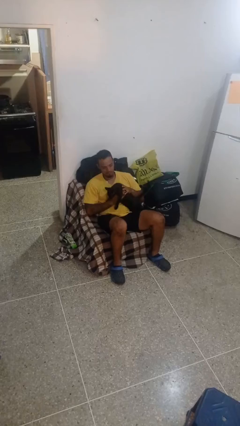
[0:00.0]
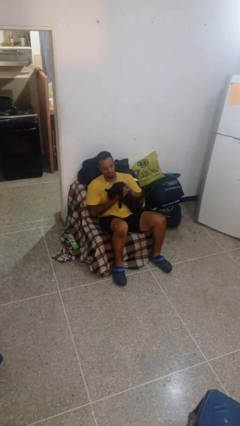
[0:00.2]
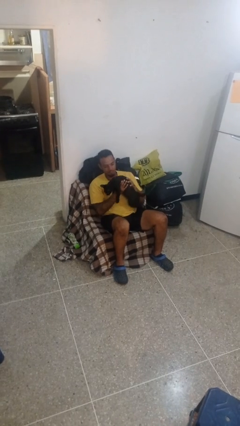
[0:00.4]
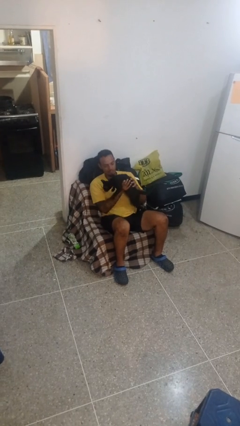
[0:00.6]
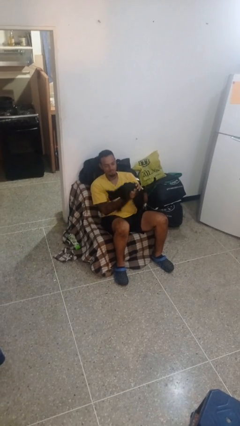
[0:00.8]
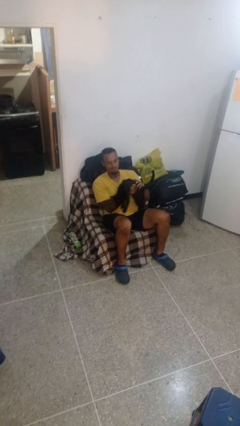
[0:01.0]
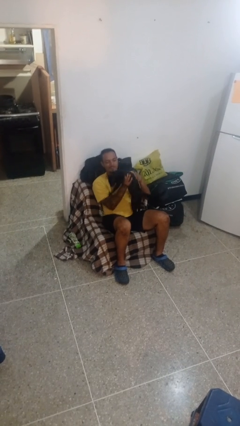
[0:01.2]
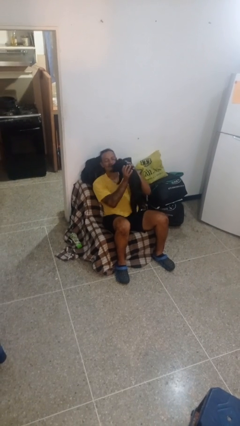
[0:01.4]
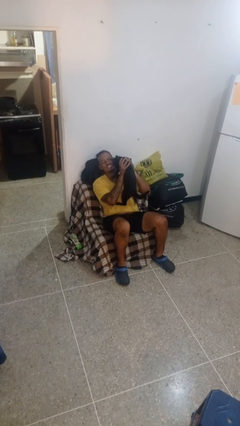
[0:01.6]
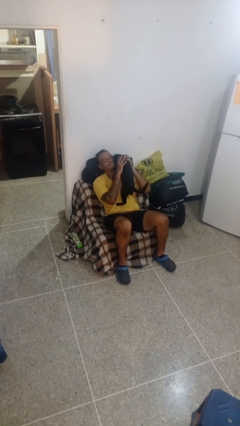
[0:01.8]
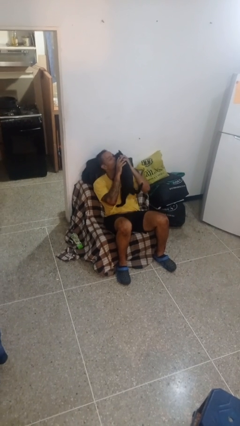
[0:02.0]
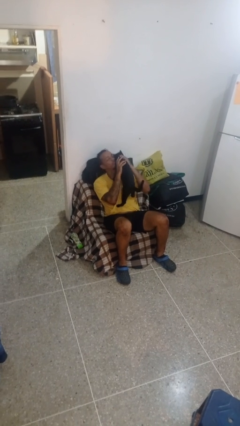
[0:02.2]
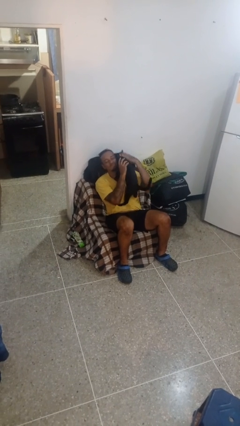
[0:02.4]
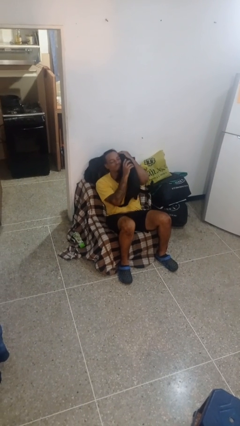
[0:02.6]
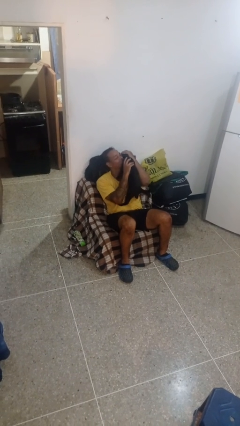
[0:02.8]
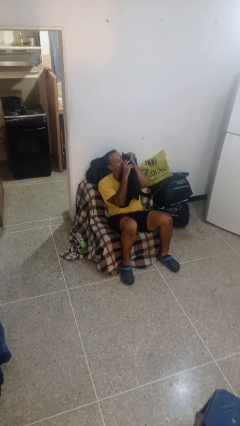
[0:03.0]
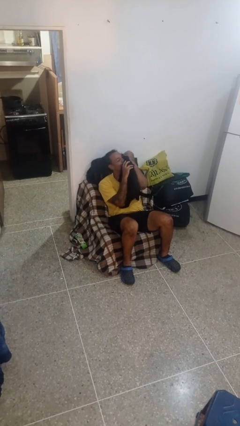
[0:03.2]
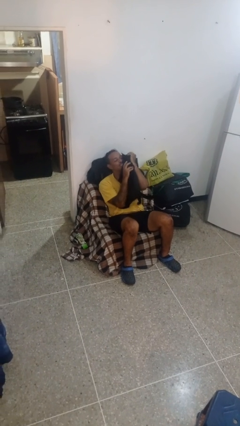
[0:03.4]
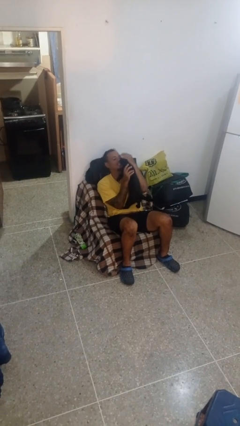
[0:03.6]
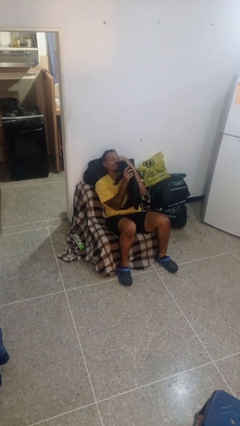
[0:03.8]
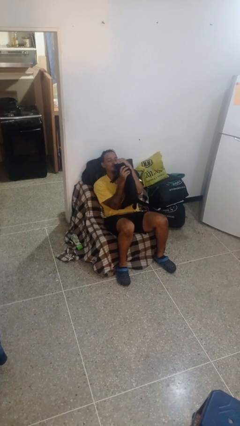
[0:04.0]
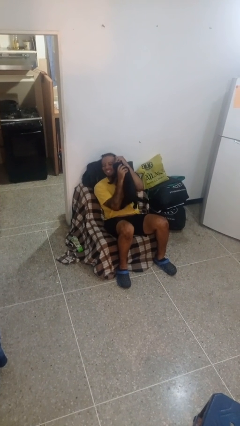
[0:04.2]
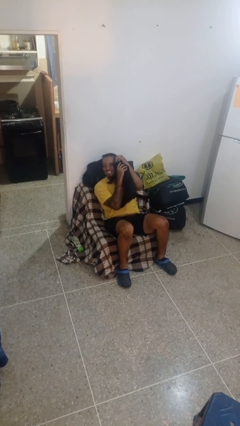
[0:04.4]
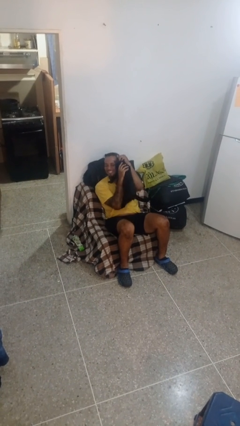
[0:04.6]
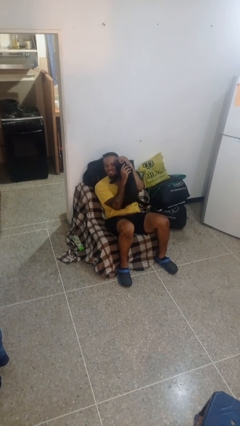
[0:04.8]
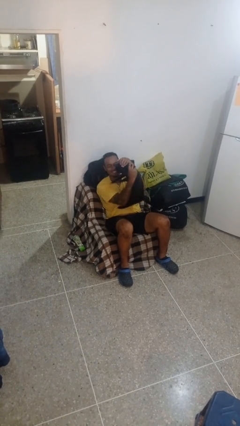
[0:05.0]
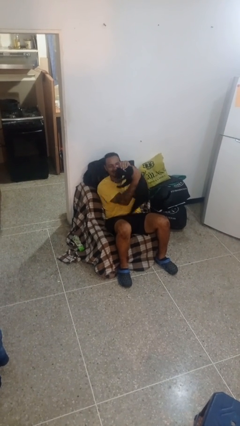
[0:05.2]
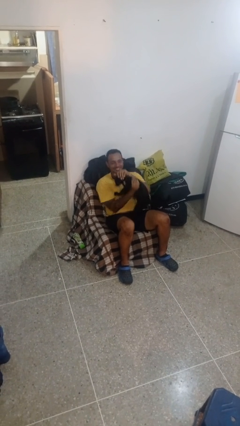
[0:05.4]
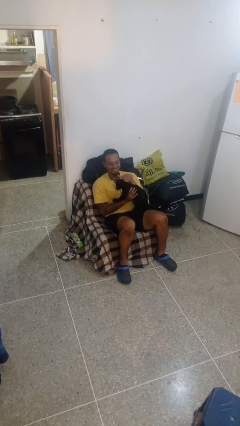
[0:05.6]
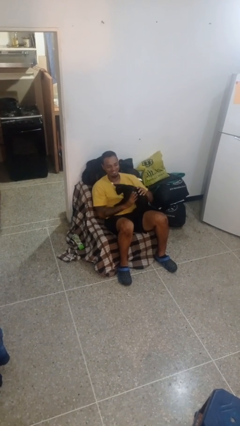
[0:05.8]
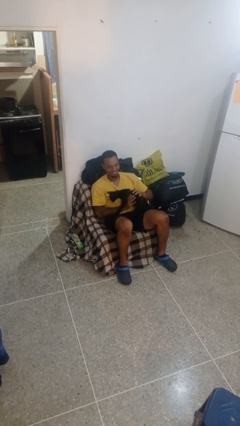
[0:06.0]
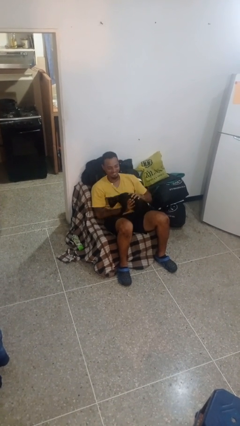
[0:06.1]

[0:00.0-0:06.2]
person hugs cat

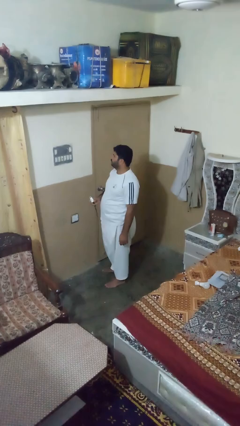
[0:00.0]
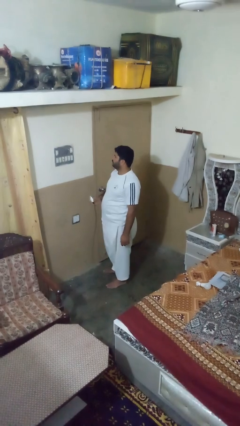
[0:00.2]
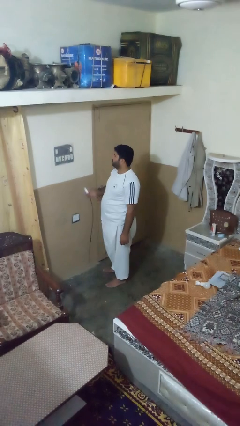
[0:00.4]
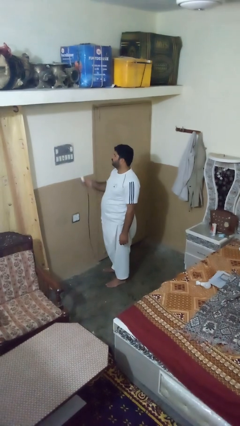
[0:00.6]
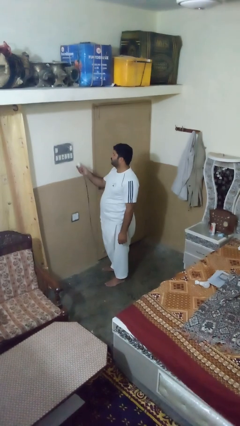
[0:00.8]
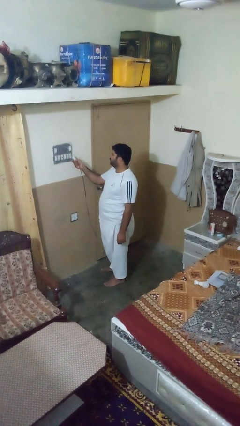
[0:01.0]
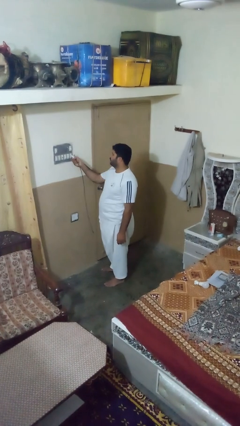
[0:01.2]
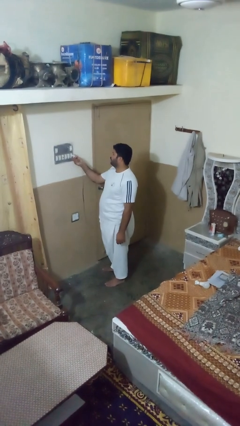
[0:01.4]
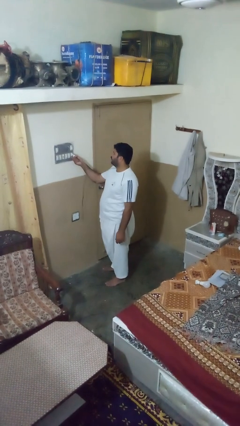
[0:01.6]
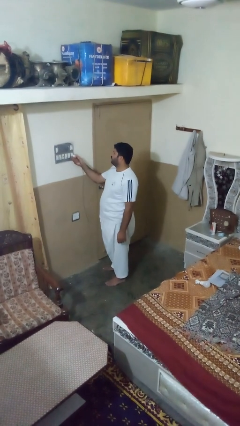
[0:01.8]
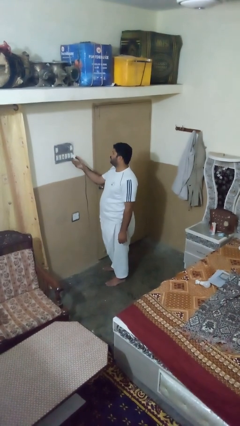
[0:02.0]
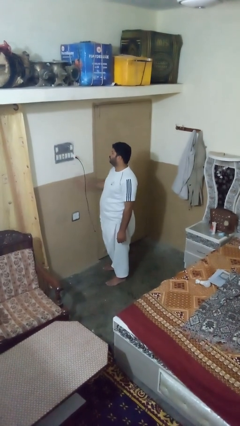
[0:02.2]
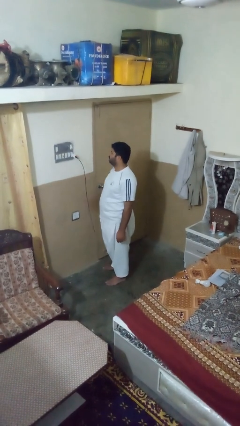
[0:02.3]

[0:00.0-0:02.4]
person plugs into electrical socket

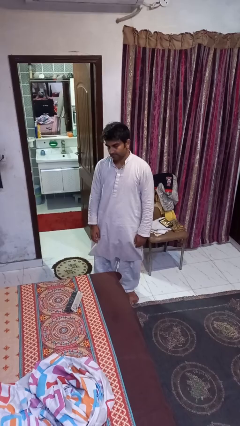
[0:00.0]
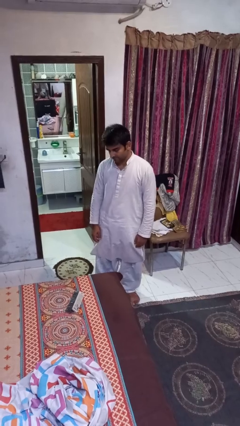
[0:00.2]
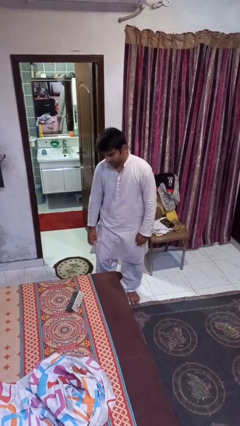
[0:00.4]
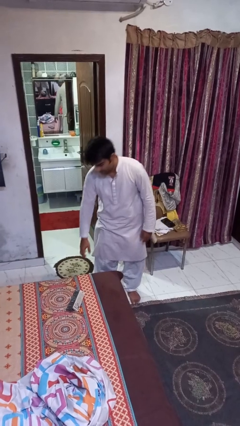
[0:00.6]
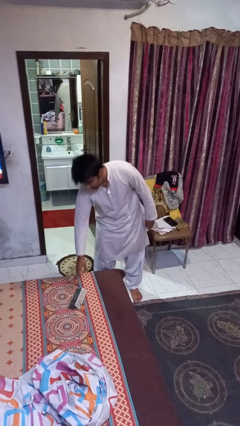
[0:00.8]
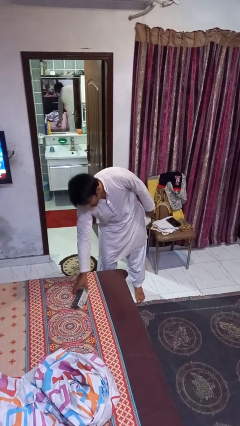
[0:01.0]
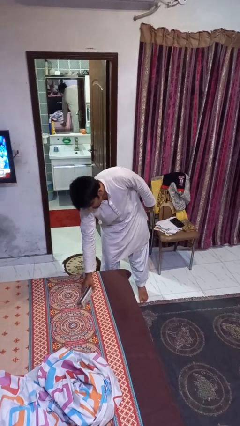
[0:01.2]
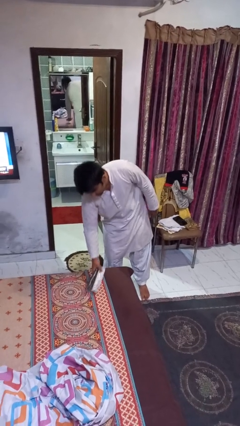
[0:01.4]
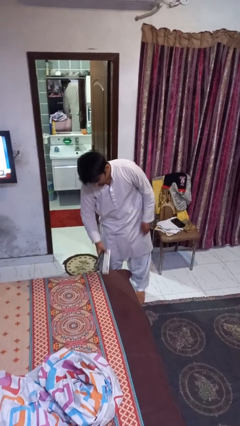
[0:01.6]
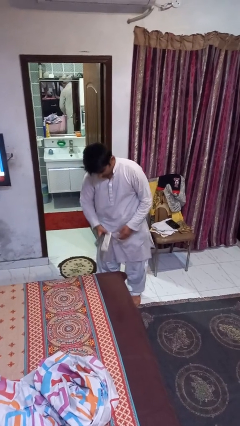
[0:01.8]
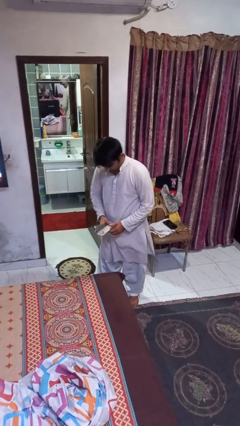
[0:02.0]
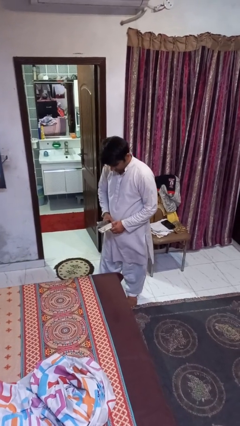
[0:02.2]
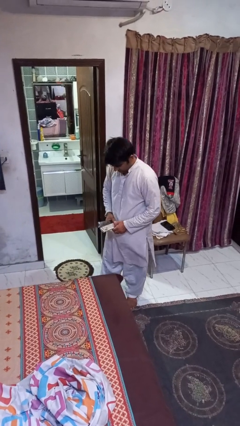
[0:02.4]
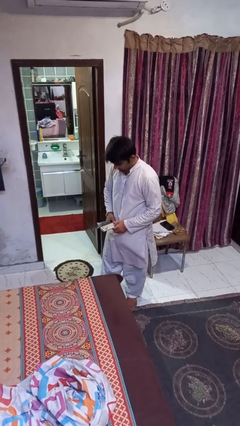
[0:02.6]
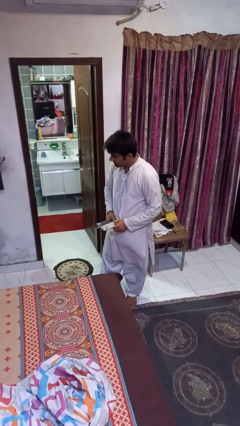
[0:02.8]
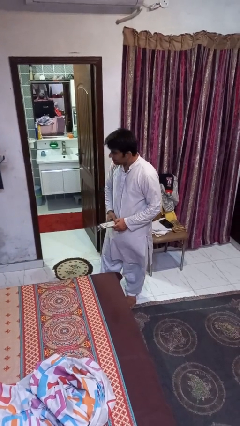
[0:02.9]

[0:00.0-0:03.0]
person picks up object from bed

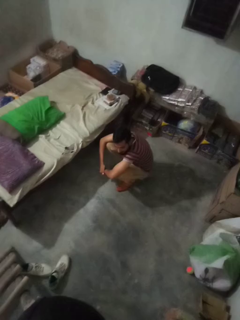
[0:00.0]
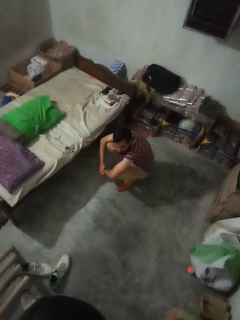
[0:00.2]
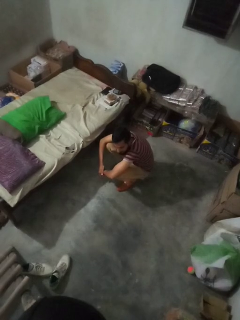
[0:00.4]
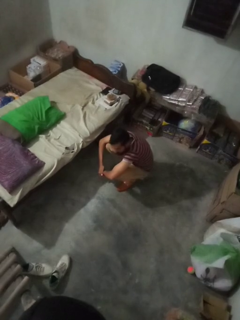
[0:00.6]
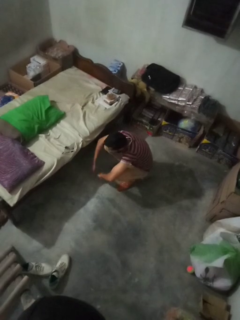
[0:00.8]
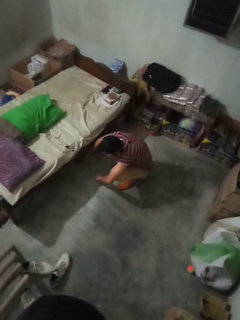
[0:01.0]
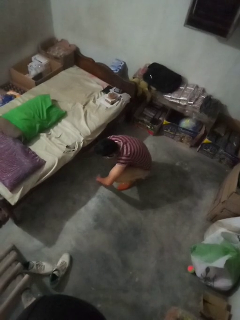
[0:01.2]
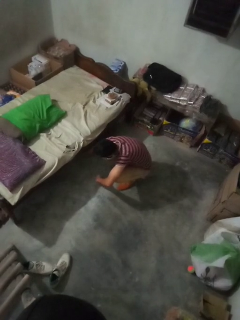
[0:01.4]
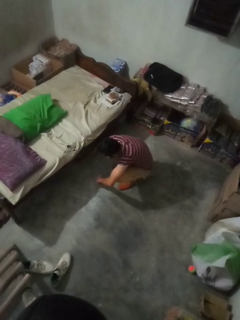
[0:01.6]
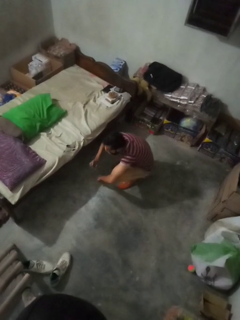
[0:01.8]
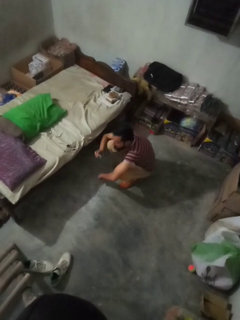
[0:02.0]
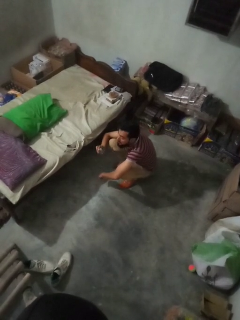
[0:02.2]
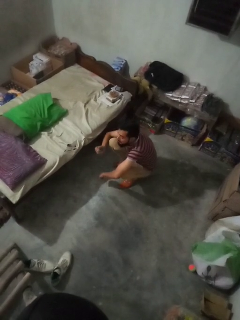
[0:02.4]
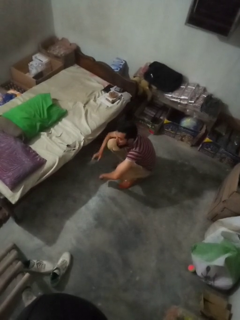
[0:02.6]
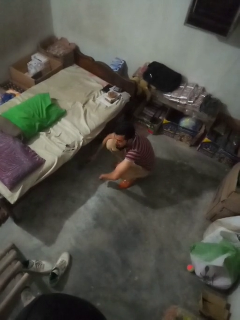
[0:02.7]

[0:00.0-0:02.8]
person searches under couch

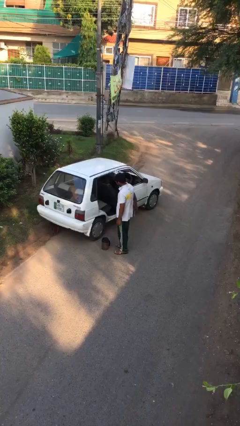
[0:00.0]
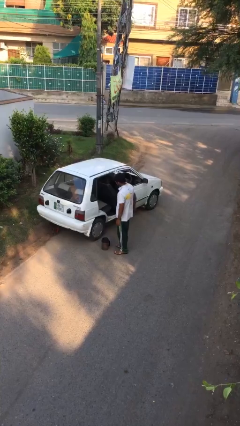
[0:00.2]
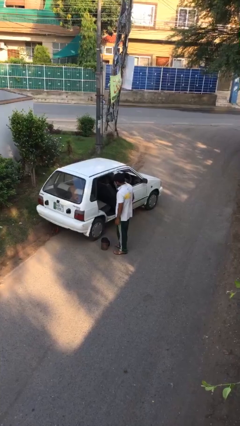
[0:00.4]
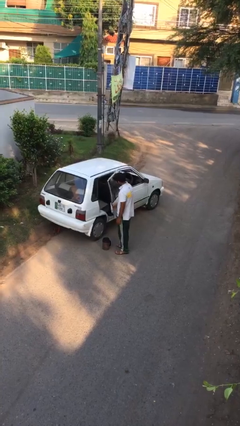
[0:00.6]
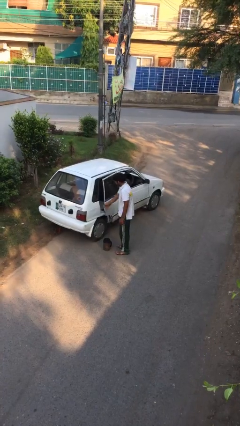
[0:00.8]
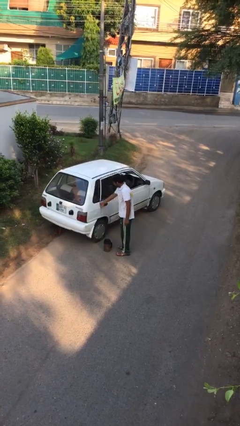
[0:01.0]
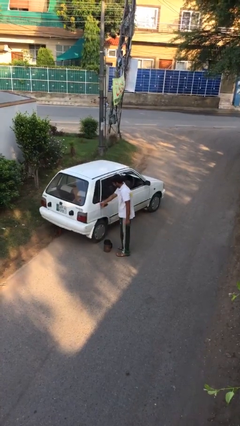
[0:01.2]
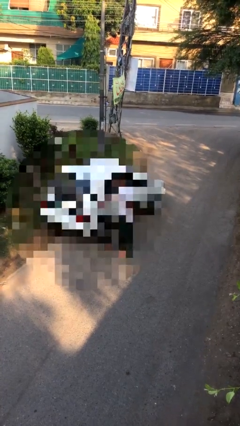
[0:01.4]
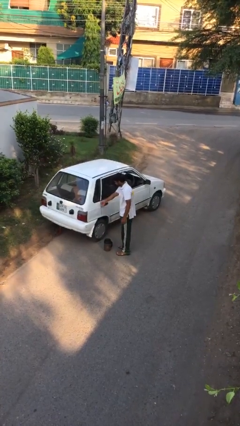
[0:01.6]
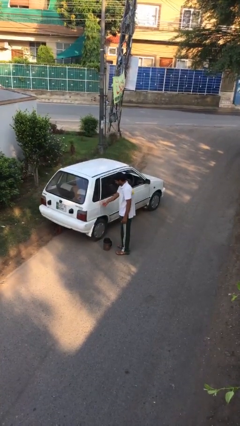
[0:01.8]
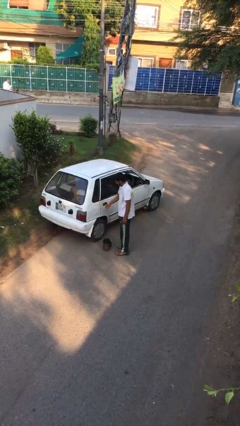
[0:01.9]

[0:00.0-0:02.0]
person closes car door

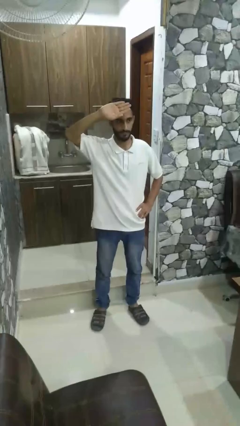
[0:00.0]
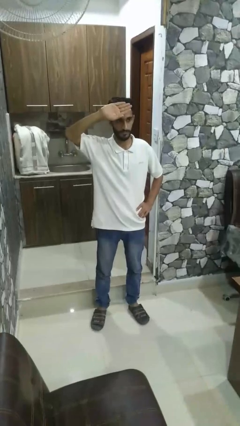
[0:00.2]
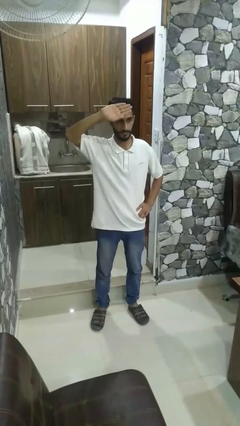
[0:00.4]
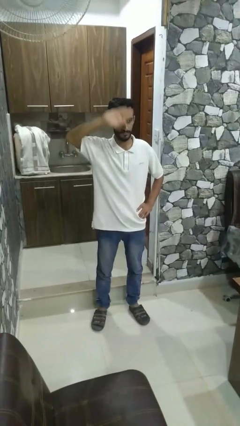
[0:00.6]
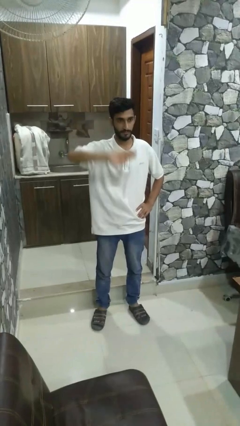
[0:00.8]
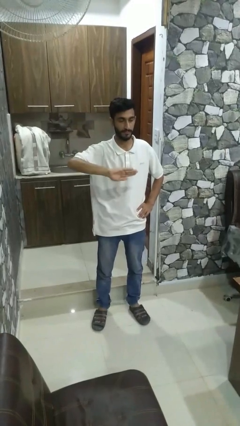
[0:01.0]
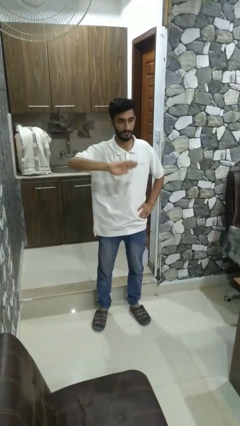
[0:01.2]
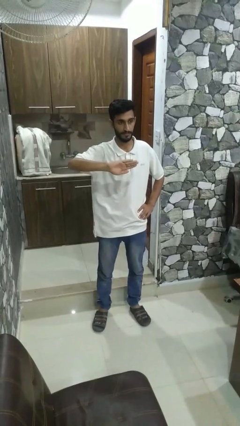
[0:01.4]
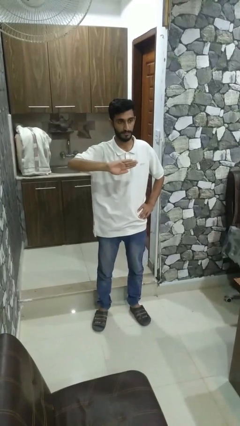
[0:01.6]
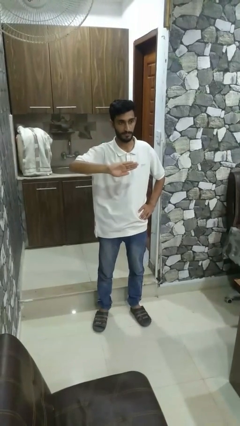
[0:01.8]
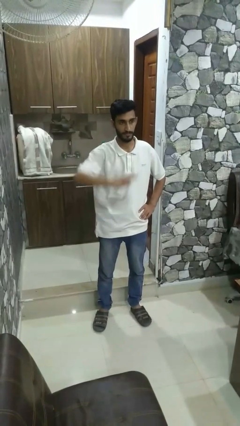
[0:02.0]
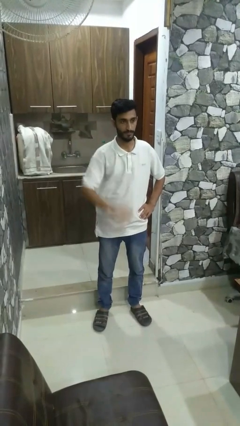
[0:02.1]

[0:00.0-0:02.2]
person gestures swipe down
